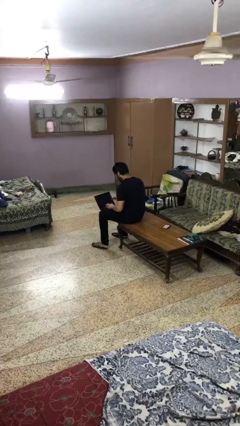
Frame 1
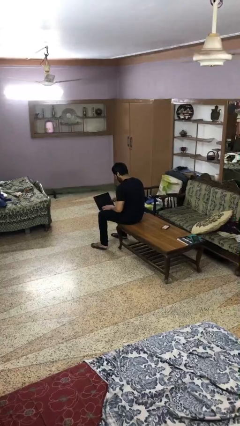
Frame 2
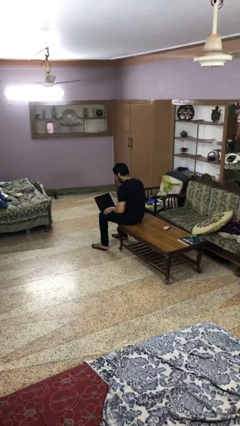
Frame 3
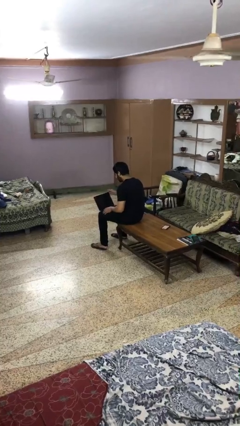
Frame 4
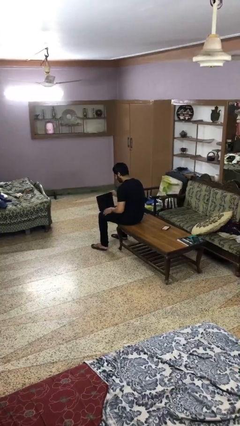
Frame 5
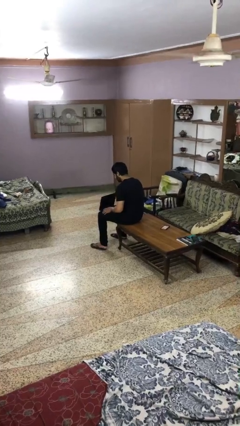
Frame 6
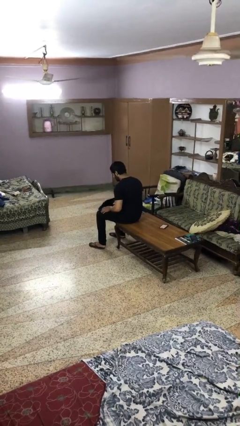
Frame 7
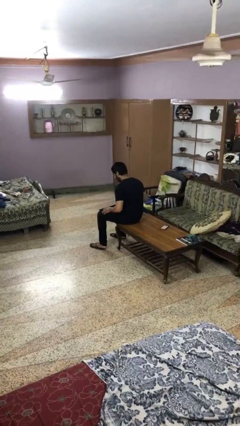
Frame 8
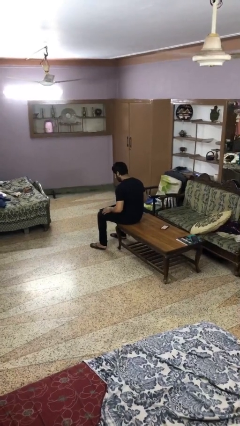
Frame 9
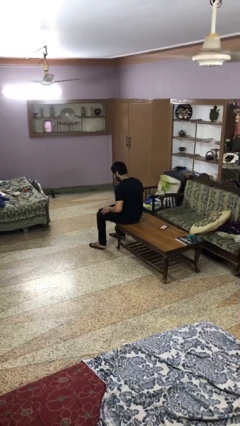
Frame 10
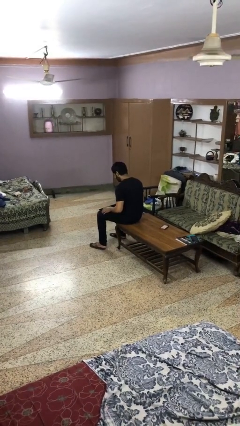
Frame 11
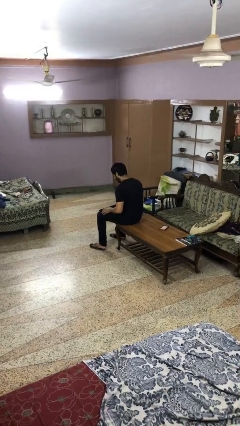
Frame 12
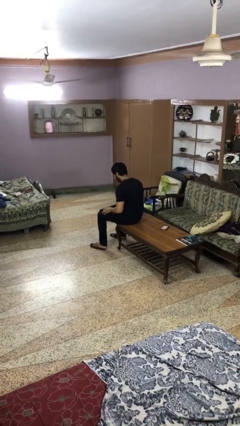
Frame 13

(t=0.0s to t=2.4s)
person closes laptop

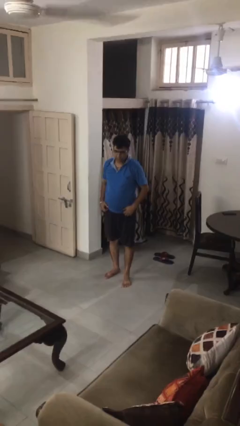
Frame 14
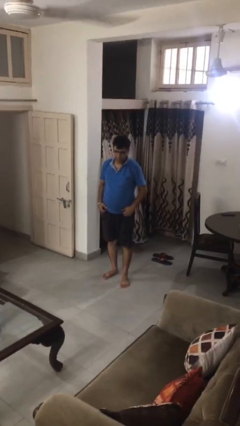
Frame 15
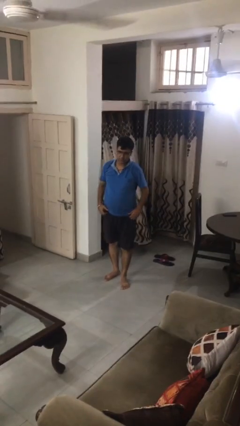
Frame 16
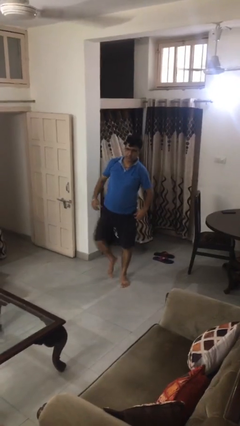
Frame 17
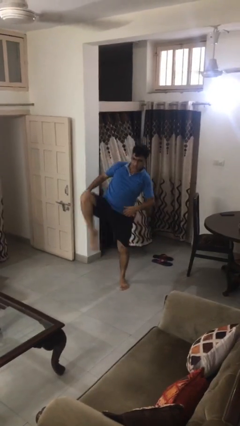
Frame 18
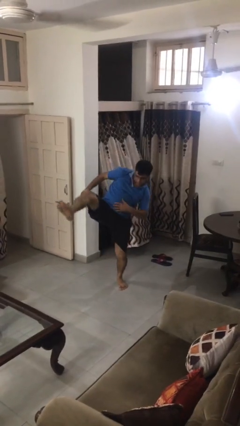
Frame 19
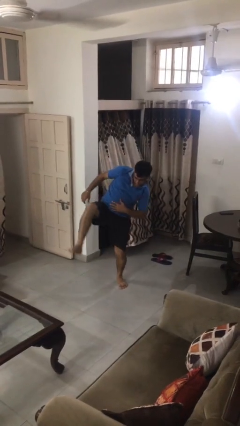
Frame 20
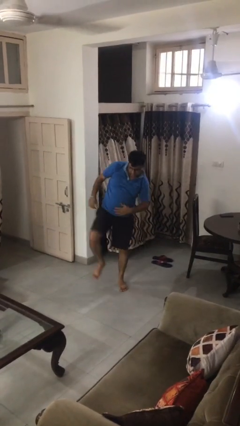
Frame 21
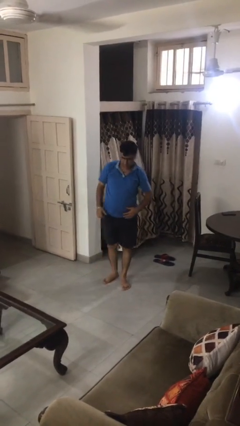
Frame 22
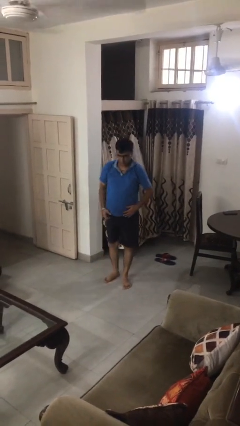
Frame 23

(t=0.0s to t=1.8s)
person karate kicks

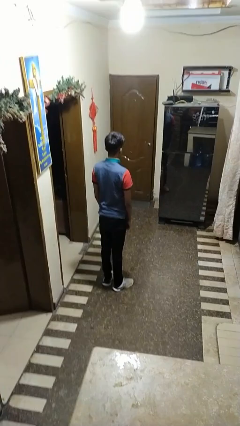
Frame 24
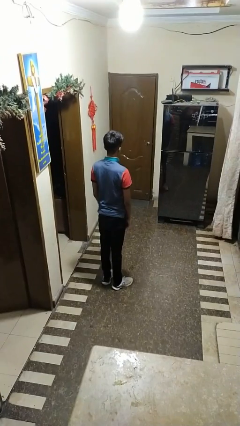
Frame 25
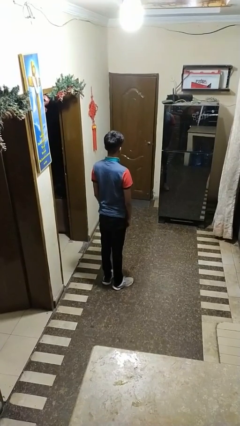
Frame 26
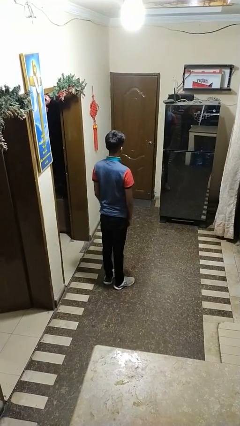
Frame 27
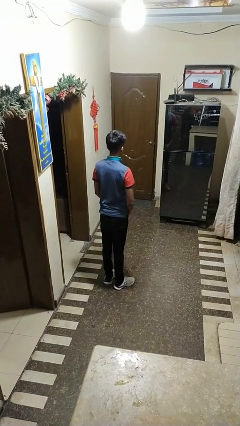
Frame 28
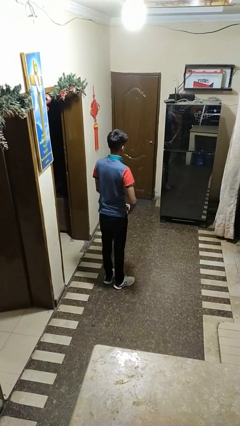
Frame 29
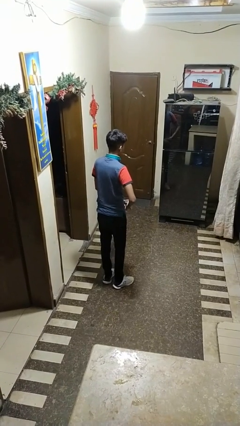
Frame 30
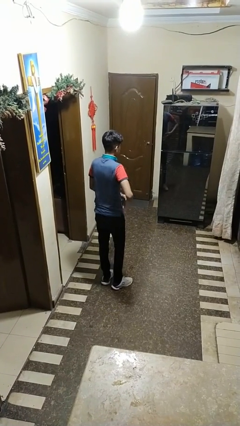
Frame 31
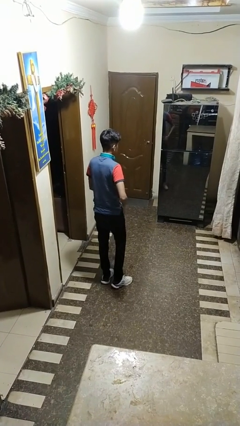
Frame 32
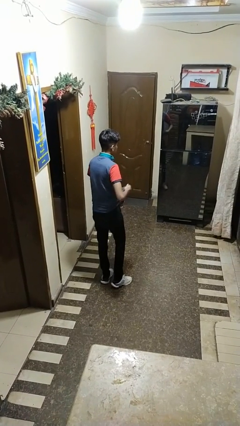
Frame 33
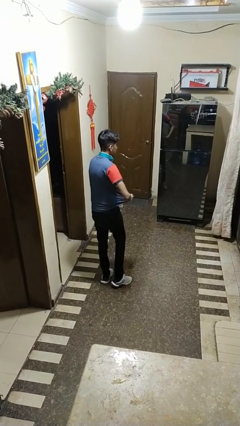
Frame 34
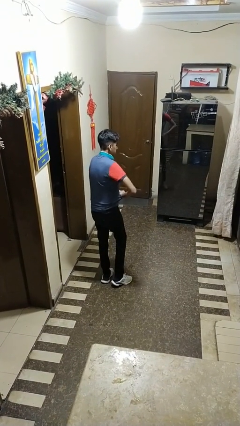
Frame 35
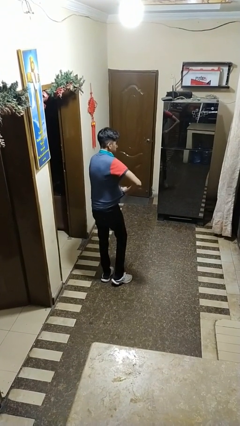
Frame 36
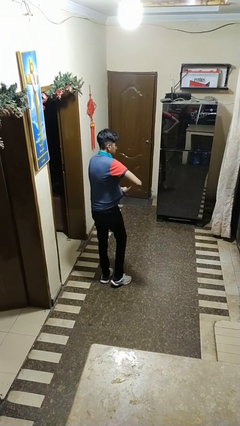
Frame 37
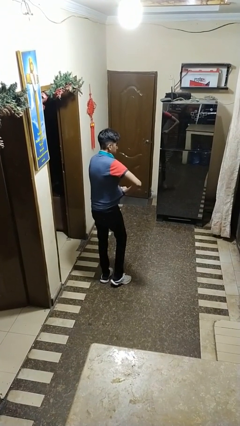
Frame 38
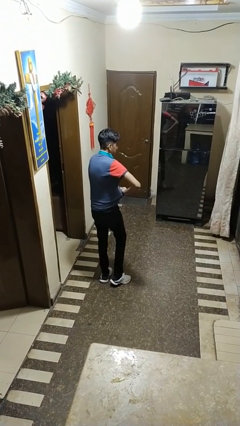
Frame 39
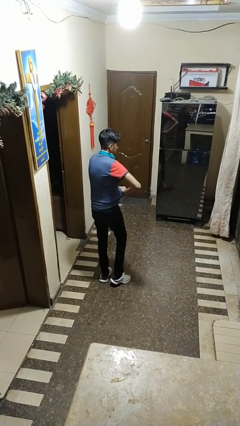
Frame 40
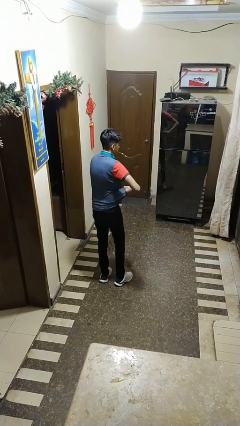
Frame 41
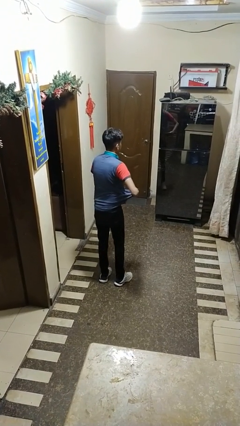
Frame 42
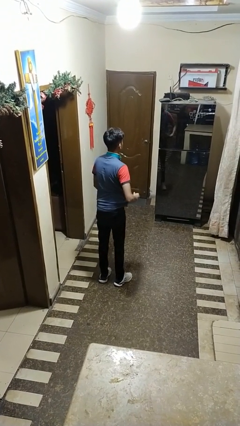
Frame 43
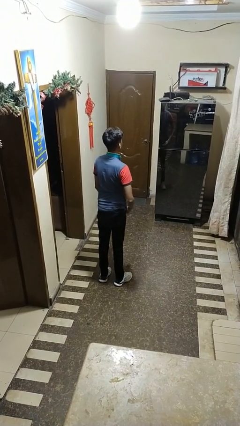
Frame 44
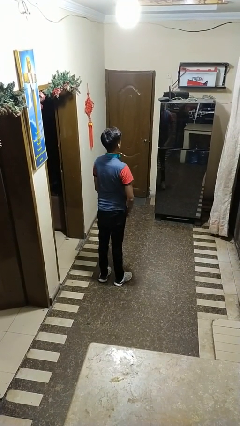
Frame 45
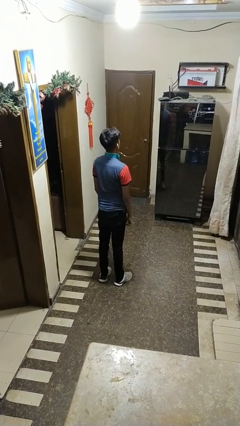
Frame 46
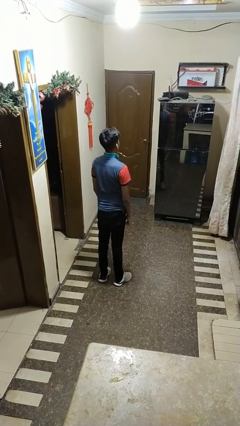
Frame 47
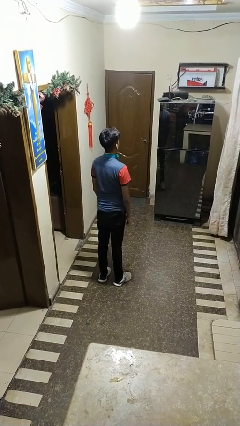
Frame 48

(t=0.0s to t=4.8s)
person applies deodorant

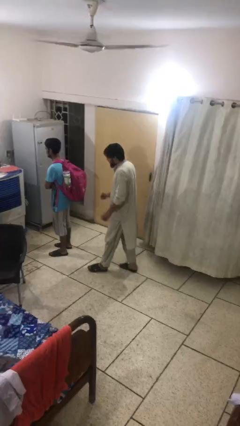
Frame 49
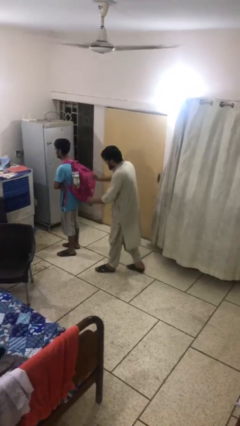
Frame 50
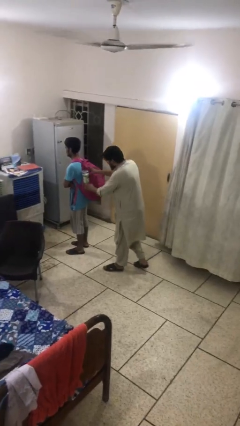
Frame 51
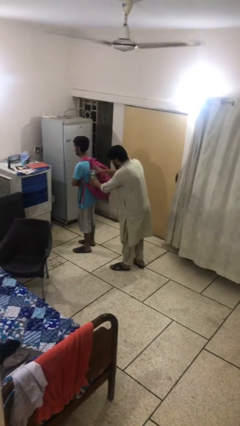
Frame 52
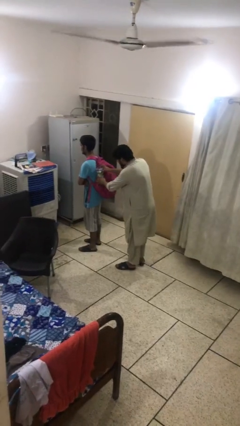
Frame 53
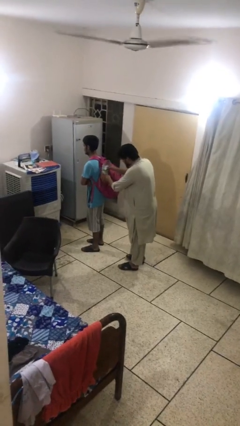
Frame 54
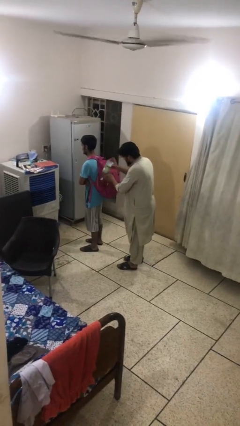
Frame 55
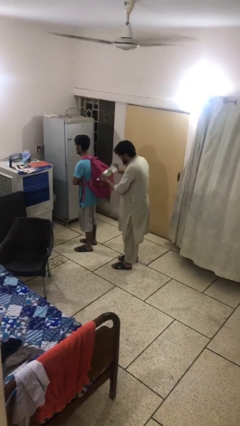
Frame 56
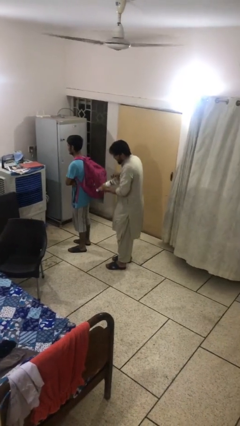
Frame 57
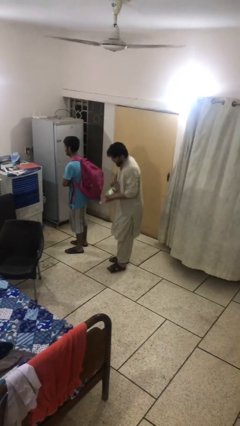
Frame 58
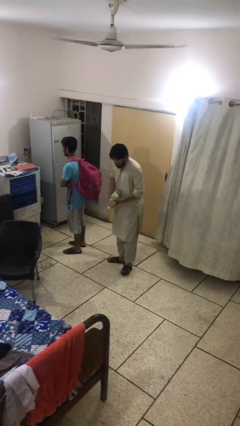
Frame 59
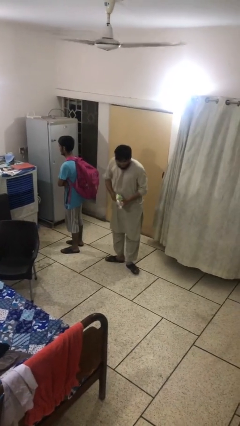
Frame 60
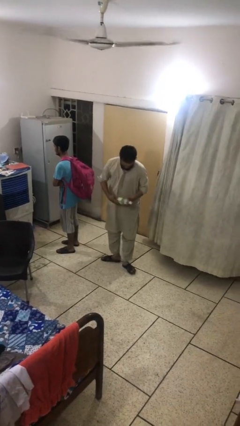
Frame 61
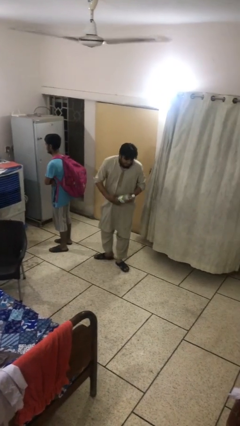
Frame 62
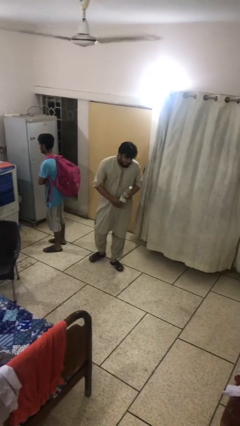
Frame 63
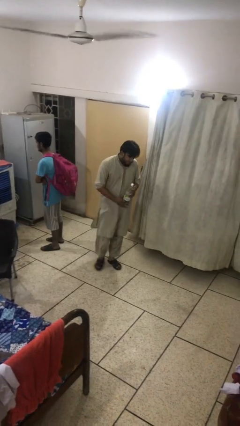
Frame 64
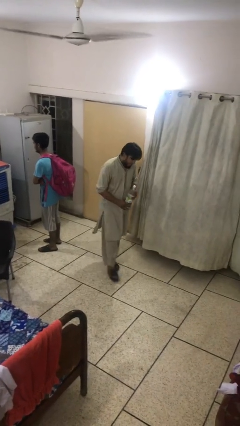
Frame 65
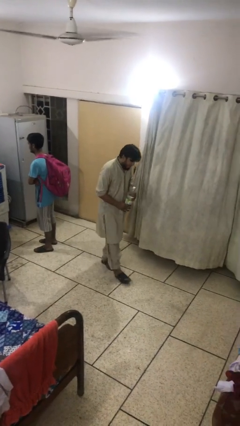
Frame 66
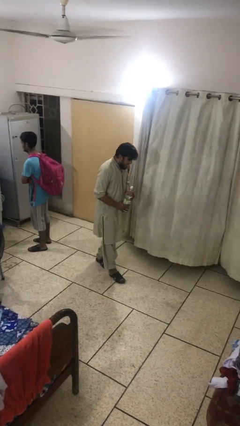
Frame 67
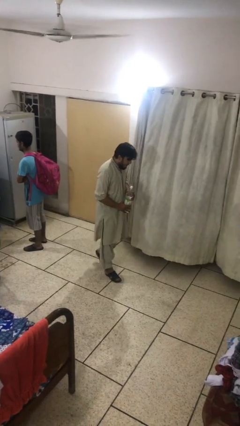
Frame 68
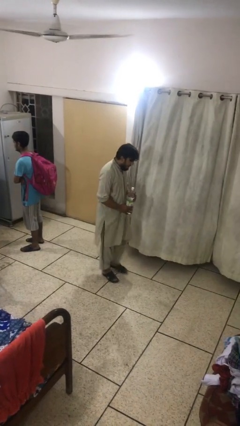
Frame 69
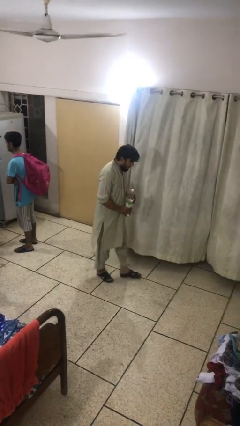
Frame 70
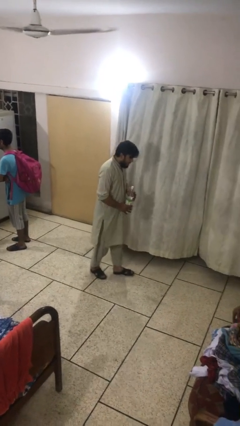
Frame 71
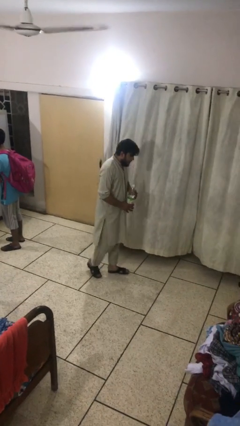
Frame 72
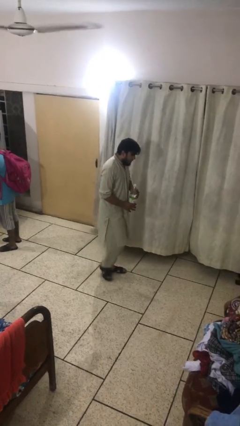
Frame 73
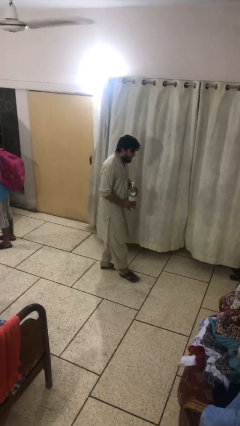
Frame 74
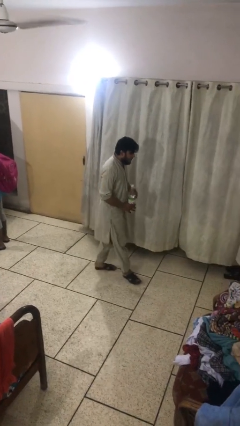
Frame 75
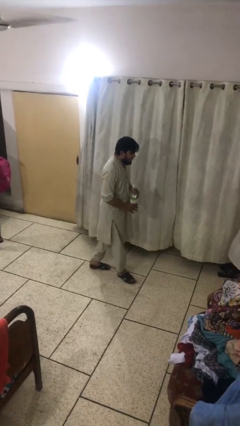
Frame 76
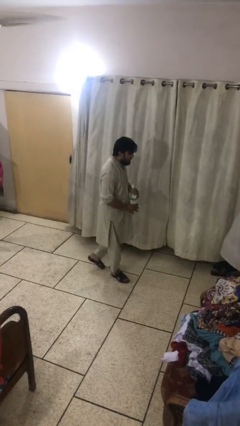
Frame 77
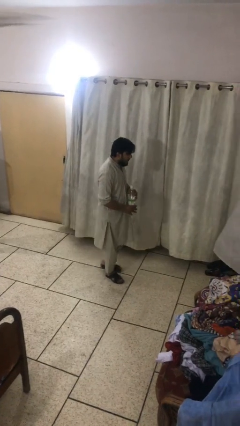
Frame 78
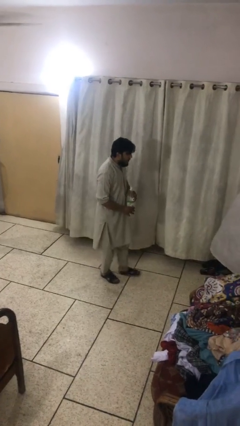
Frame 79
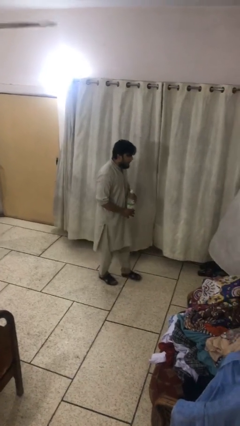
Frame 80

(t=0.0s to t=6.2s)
person steals object from person

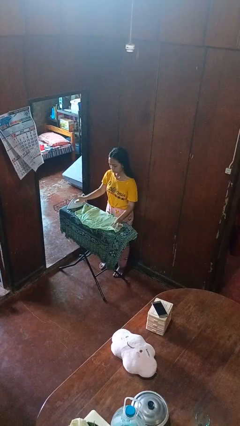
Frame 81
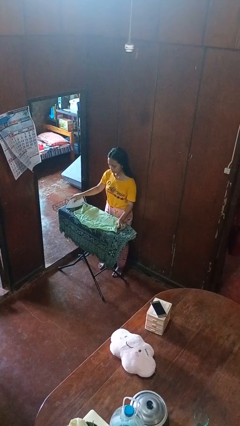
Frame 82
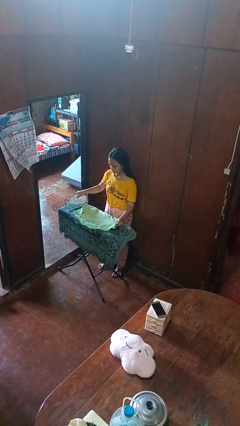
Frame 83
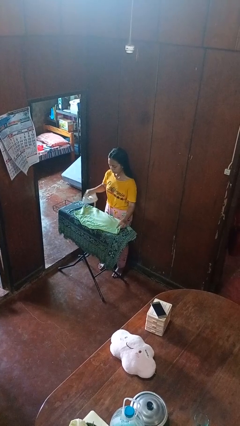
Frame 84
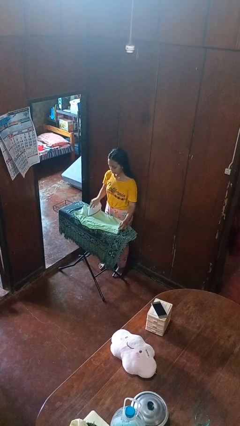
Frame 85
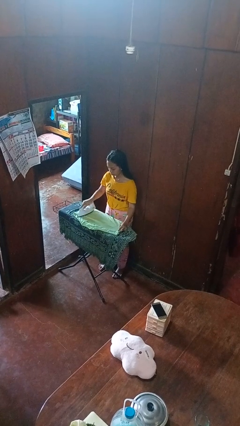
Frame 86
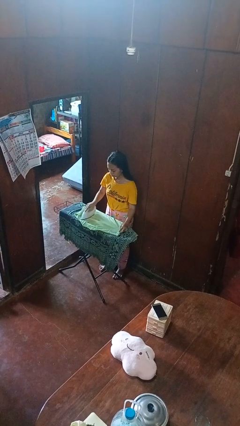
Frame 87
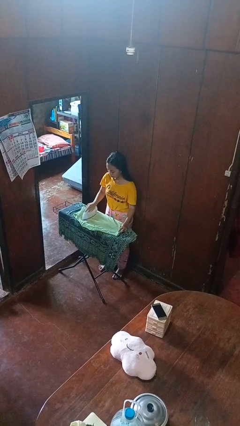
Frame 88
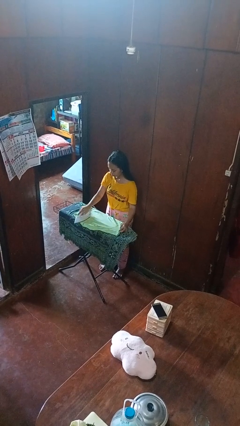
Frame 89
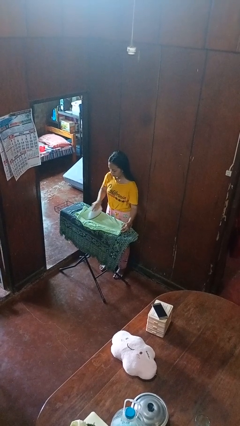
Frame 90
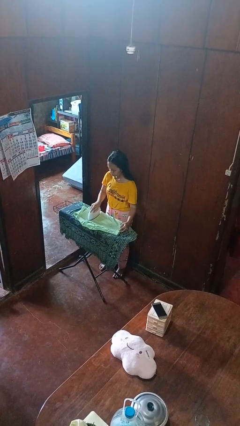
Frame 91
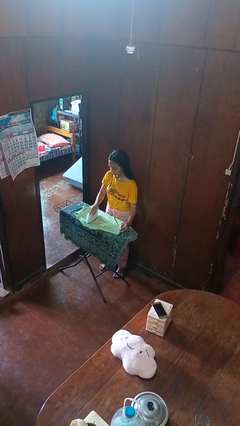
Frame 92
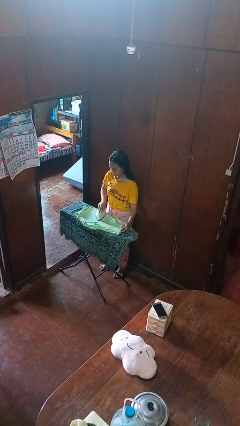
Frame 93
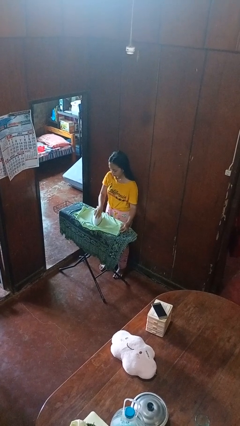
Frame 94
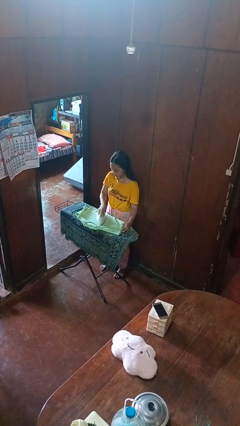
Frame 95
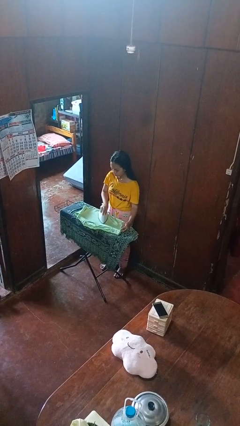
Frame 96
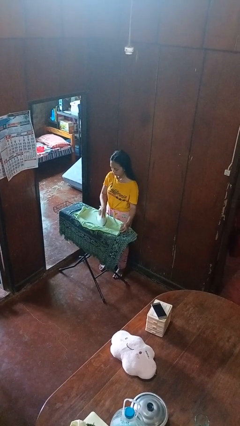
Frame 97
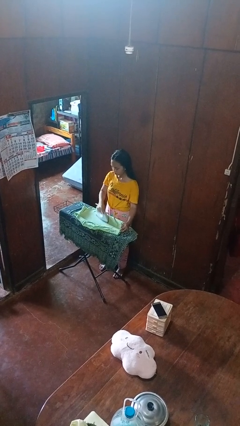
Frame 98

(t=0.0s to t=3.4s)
person irons clothes
